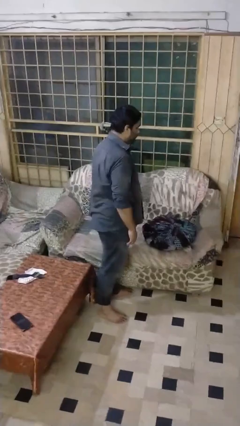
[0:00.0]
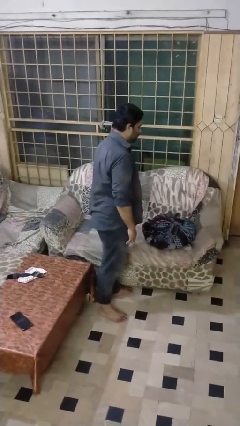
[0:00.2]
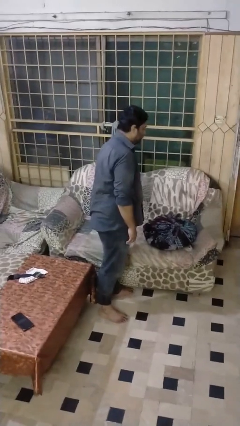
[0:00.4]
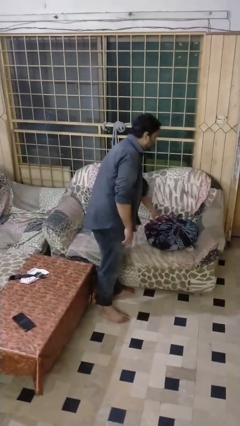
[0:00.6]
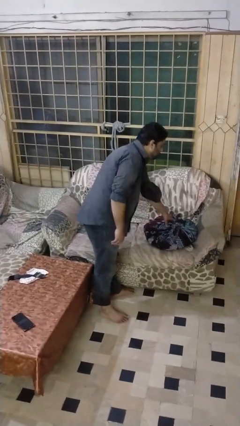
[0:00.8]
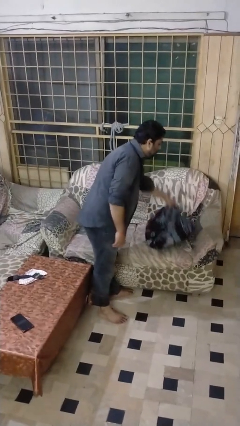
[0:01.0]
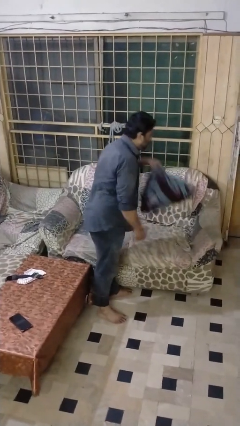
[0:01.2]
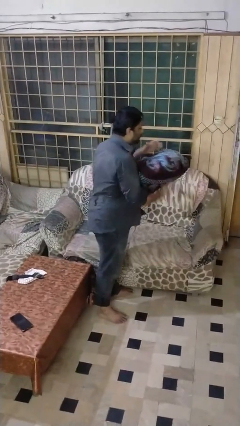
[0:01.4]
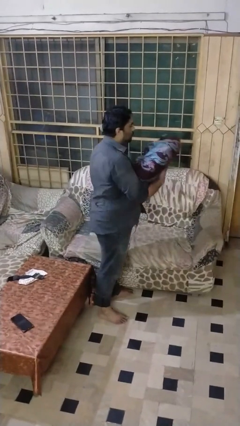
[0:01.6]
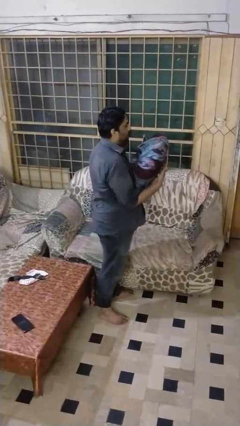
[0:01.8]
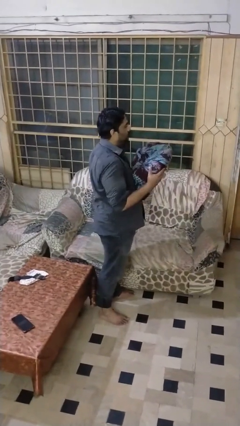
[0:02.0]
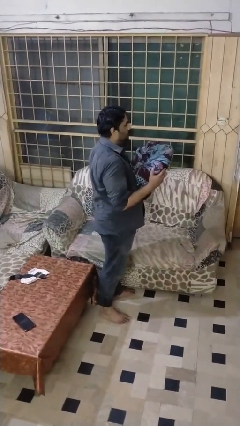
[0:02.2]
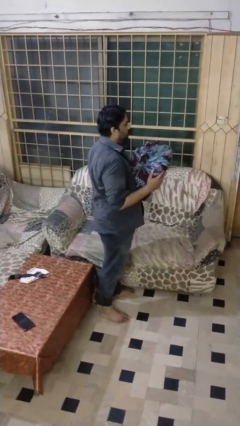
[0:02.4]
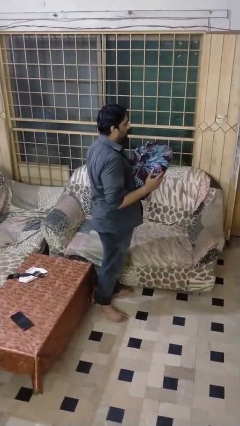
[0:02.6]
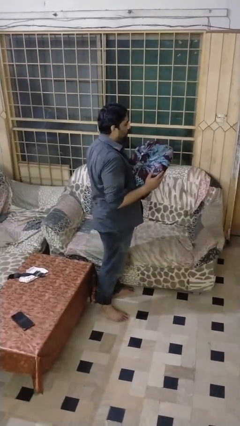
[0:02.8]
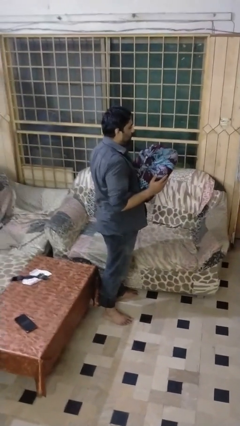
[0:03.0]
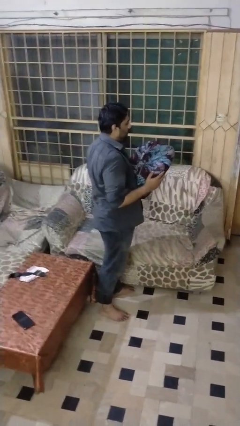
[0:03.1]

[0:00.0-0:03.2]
person picks up object from couch

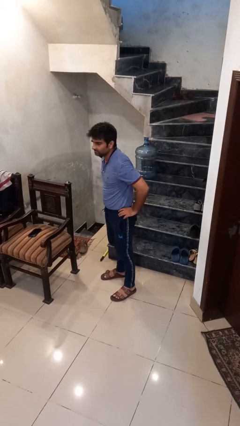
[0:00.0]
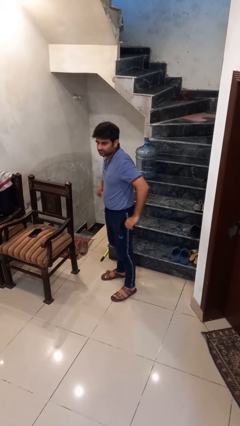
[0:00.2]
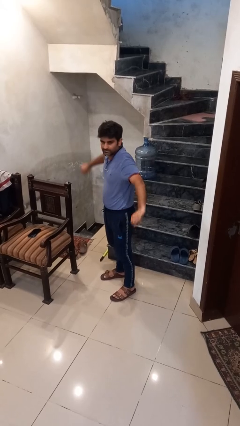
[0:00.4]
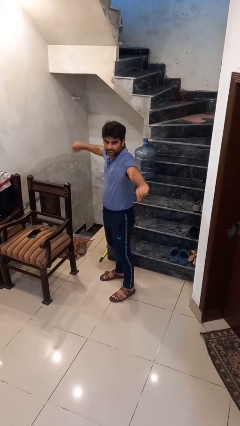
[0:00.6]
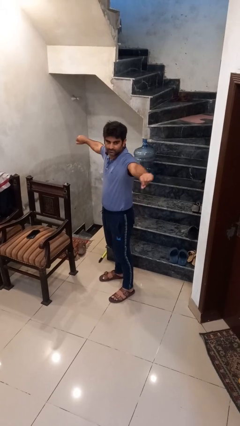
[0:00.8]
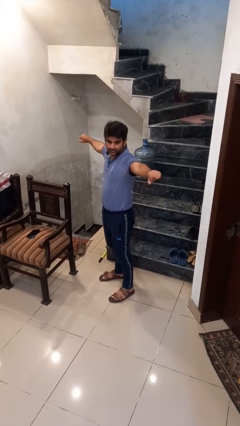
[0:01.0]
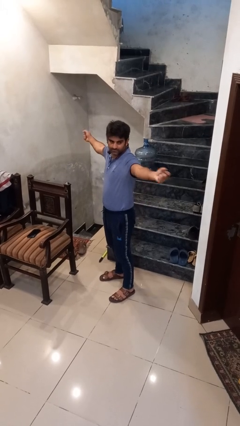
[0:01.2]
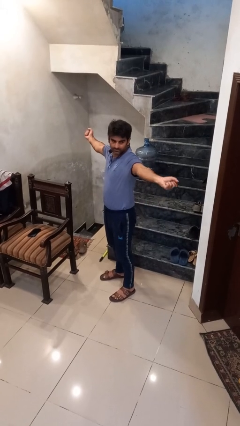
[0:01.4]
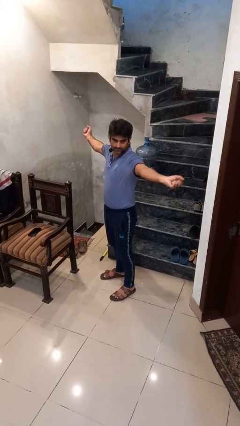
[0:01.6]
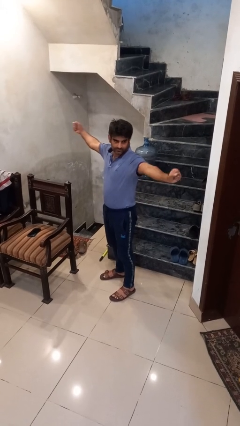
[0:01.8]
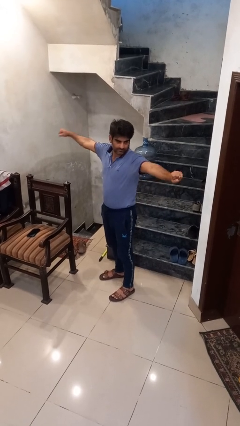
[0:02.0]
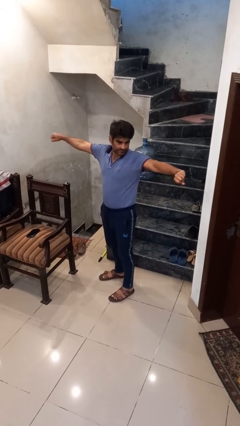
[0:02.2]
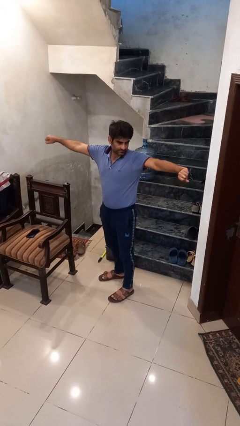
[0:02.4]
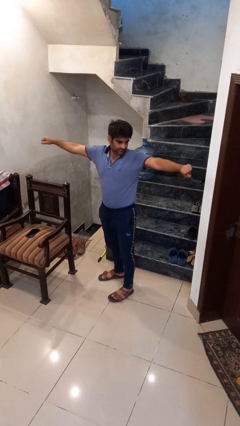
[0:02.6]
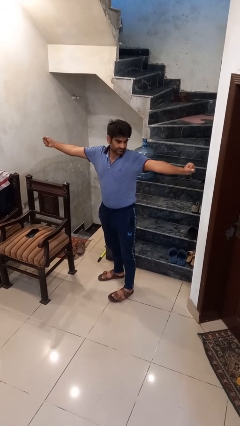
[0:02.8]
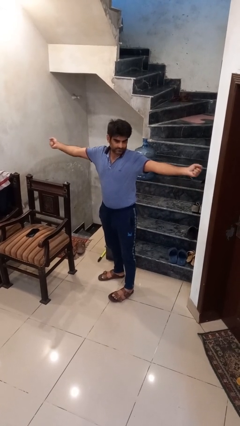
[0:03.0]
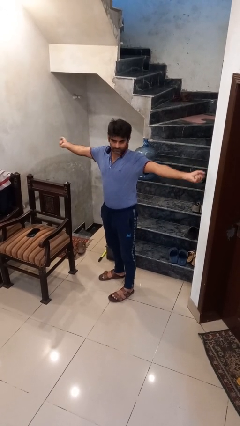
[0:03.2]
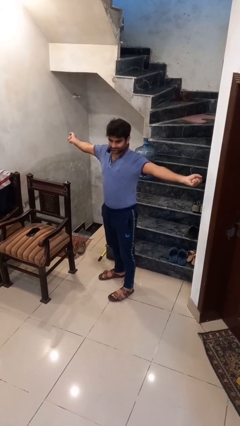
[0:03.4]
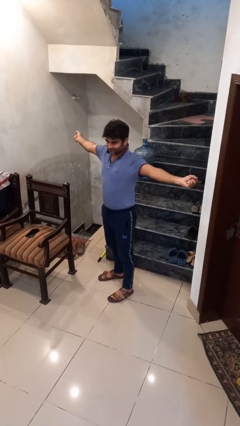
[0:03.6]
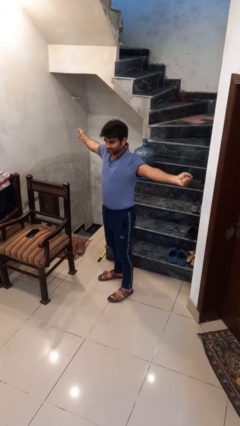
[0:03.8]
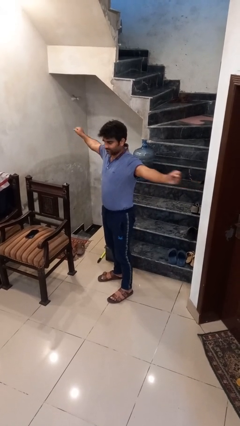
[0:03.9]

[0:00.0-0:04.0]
person stretches arms to side

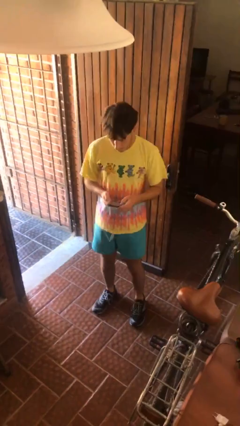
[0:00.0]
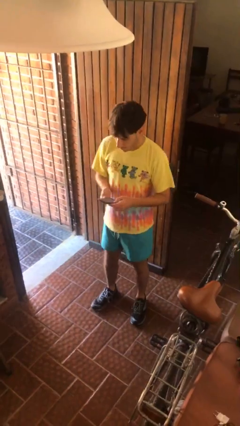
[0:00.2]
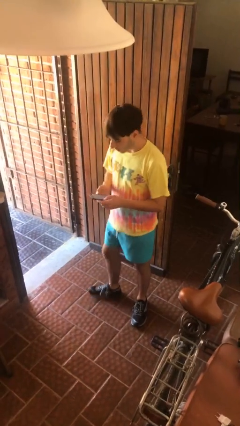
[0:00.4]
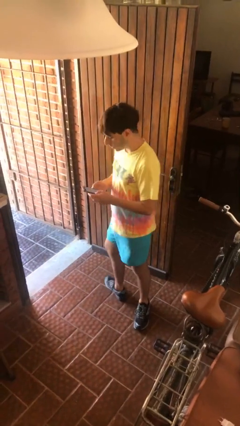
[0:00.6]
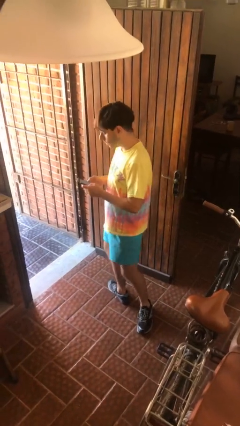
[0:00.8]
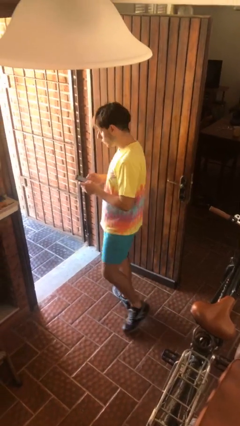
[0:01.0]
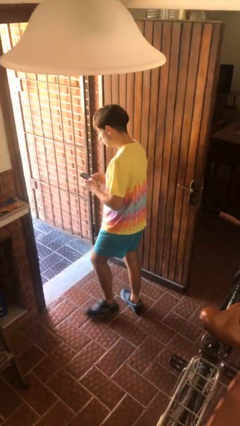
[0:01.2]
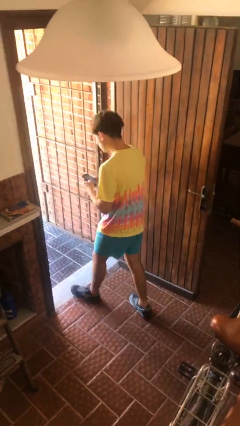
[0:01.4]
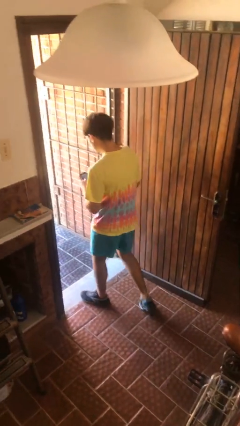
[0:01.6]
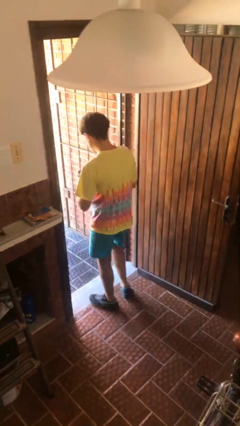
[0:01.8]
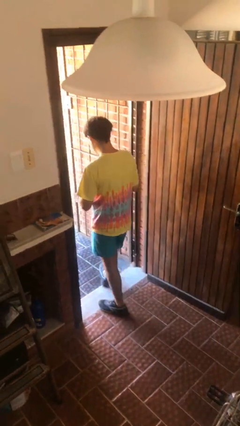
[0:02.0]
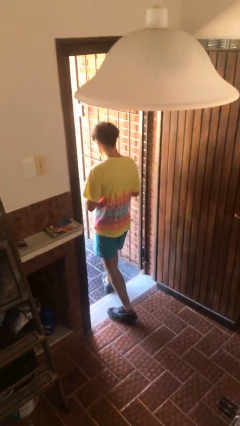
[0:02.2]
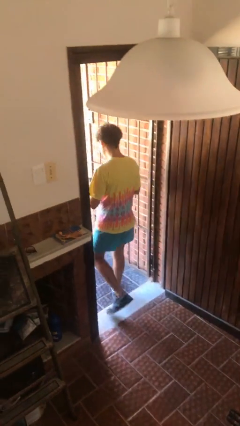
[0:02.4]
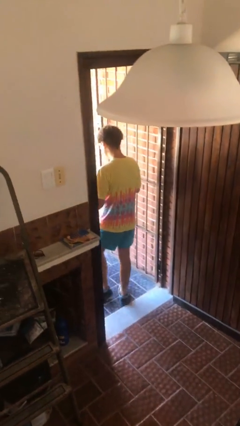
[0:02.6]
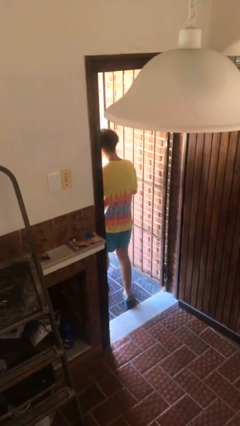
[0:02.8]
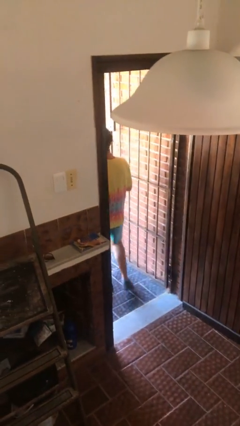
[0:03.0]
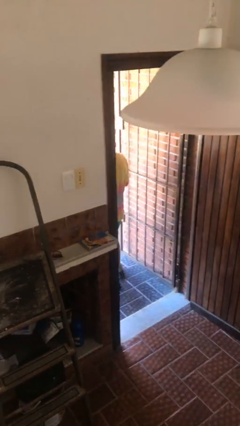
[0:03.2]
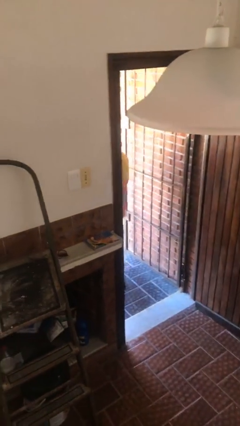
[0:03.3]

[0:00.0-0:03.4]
person exits scene through structure

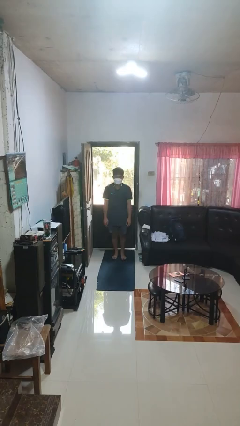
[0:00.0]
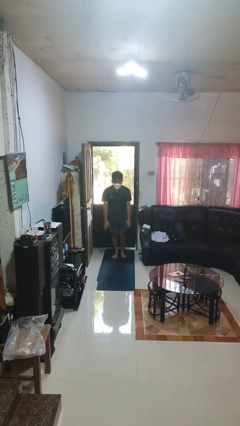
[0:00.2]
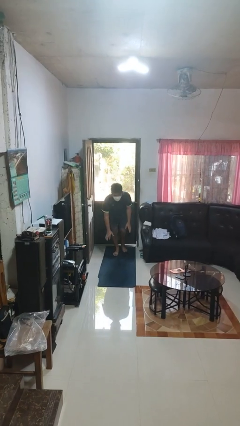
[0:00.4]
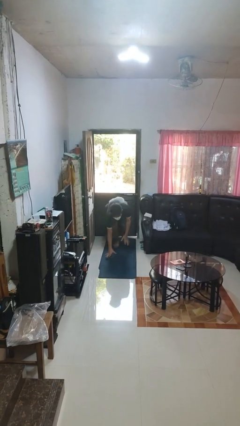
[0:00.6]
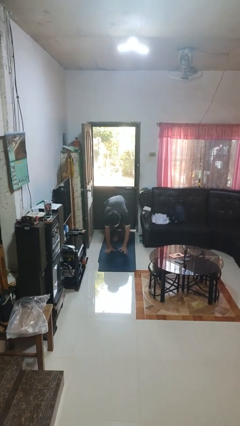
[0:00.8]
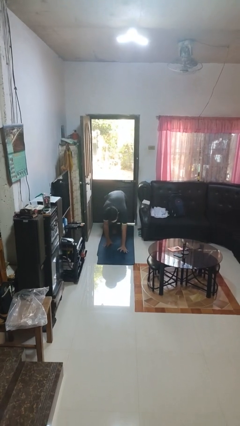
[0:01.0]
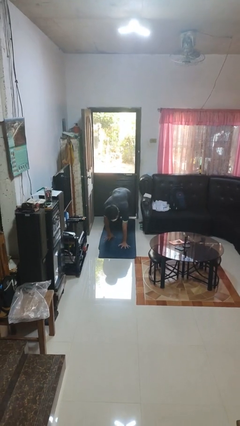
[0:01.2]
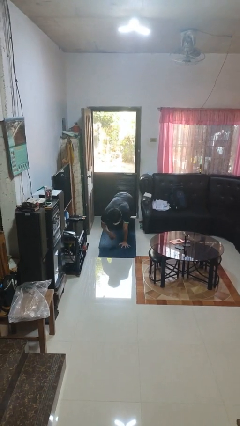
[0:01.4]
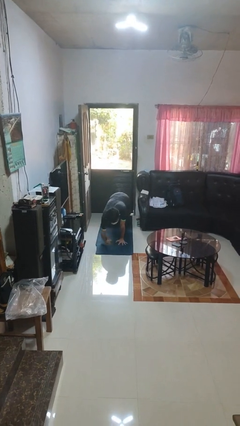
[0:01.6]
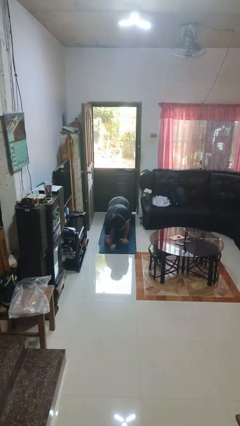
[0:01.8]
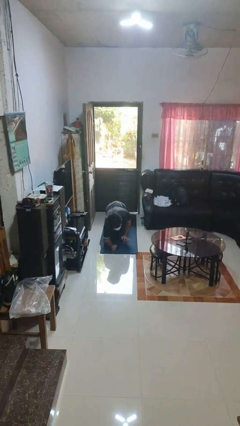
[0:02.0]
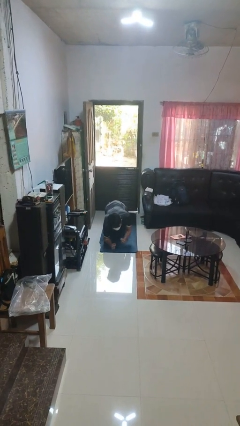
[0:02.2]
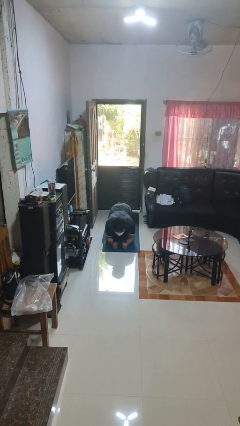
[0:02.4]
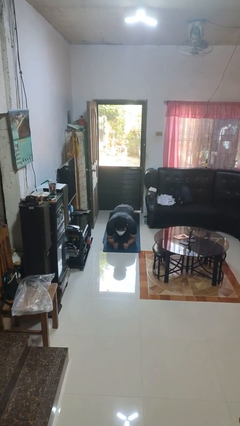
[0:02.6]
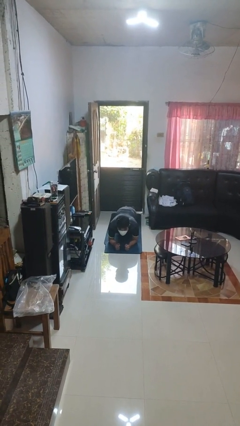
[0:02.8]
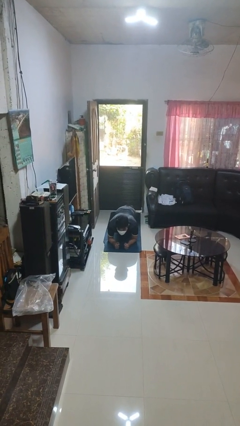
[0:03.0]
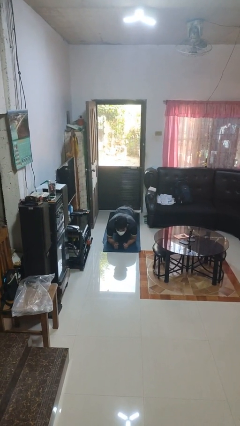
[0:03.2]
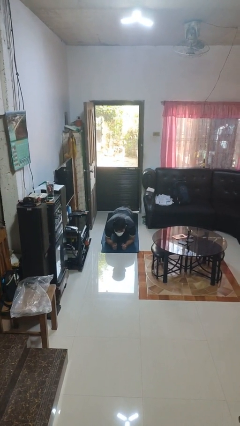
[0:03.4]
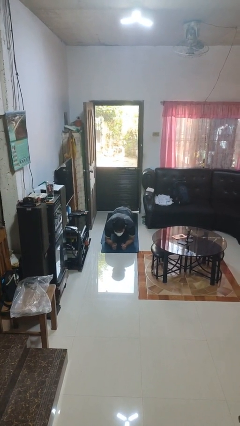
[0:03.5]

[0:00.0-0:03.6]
person exercises with plank

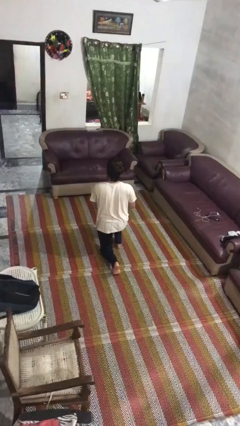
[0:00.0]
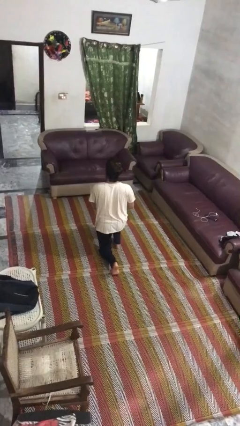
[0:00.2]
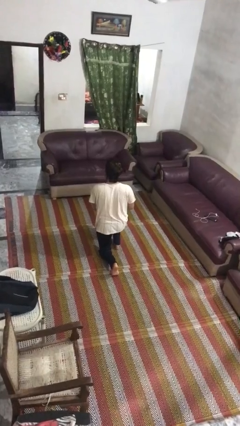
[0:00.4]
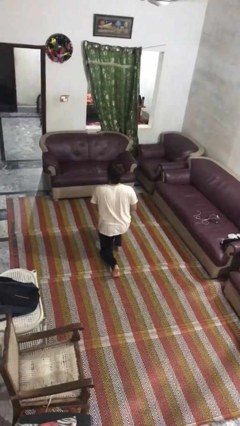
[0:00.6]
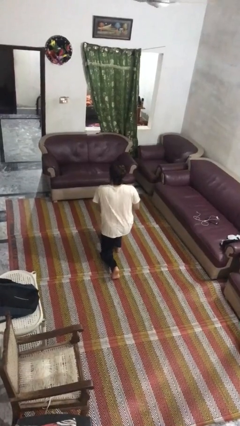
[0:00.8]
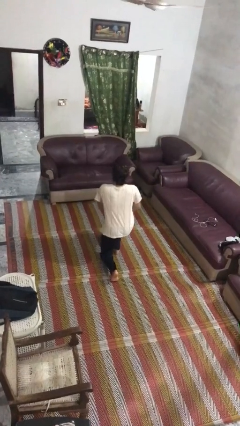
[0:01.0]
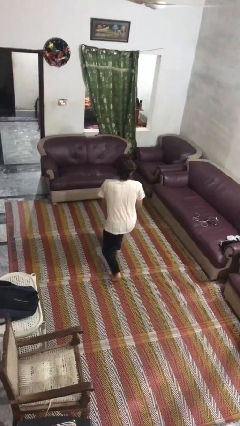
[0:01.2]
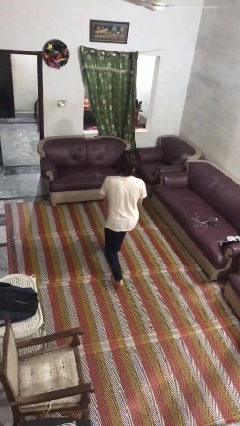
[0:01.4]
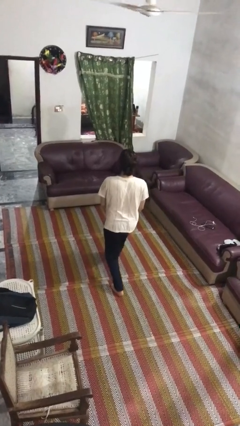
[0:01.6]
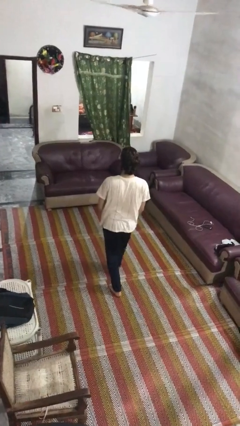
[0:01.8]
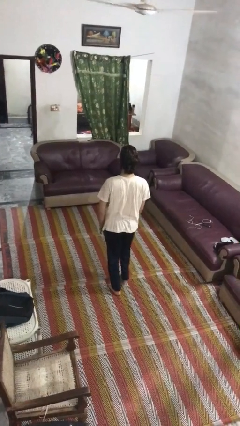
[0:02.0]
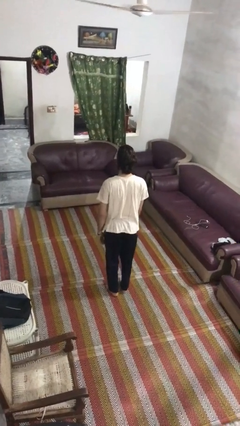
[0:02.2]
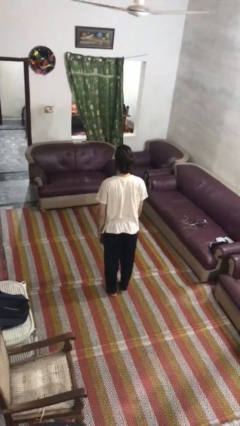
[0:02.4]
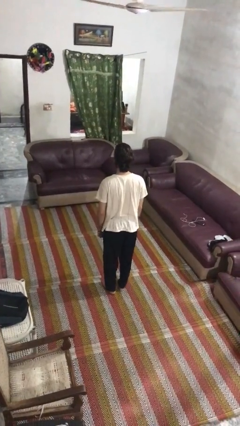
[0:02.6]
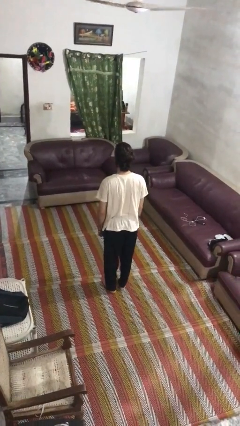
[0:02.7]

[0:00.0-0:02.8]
person stands up from floor

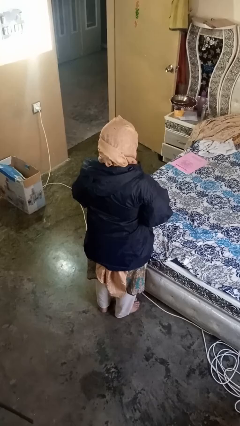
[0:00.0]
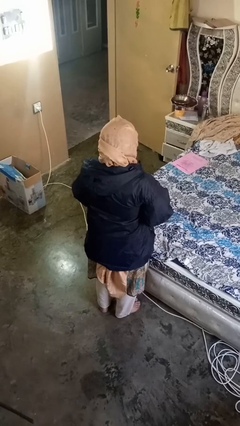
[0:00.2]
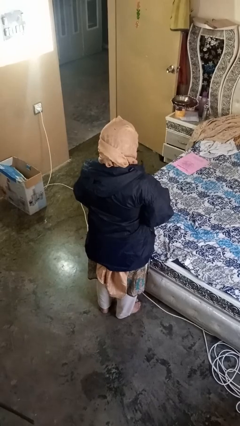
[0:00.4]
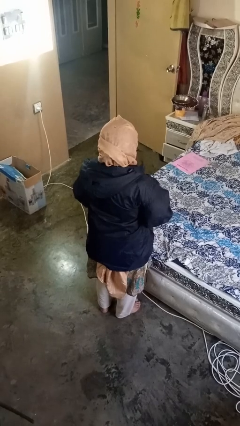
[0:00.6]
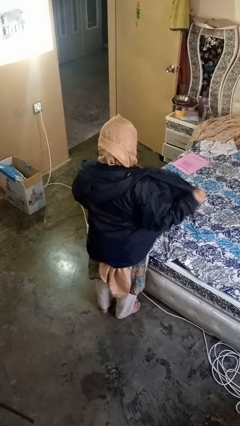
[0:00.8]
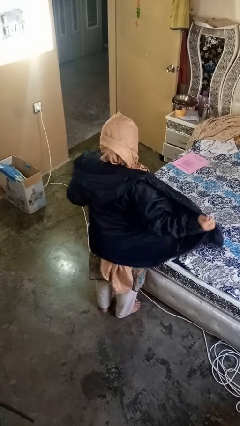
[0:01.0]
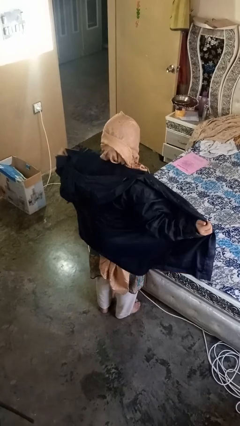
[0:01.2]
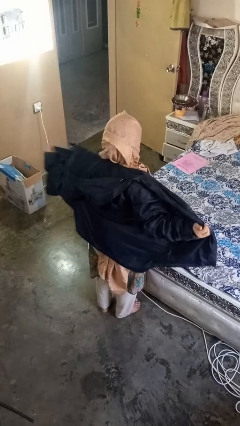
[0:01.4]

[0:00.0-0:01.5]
person unzips jacket
